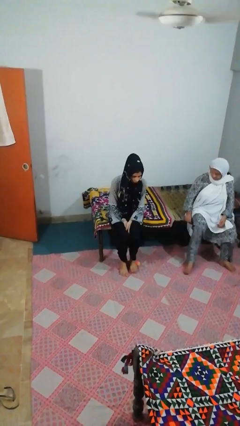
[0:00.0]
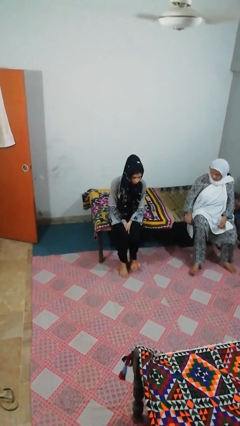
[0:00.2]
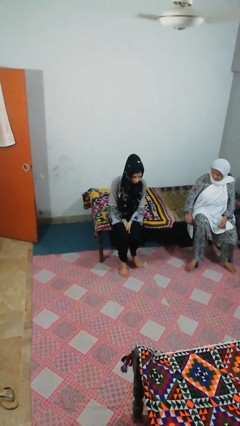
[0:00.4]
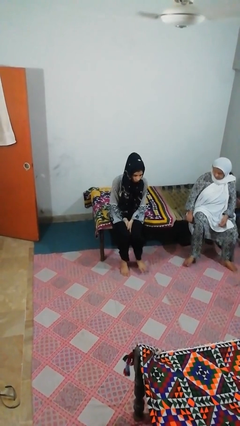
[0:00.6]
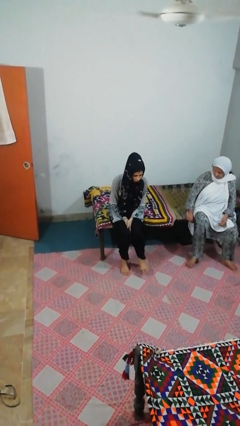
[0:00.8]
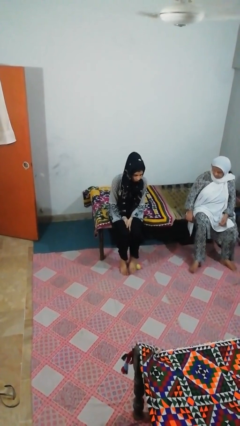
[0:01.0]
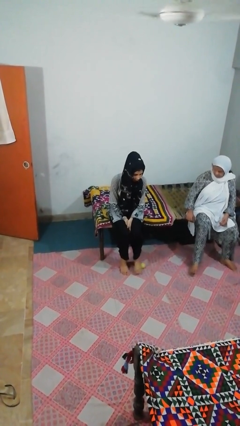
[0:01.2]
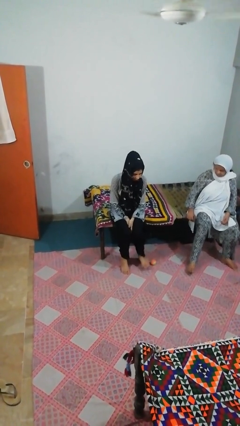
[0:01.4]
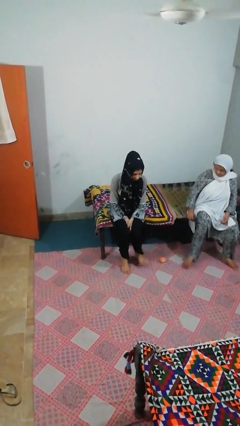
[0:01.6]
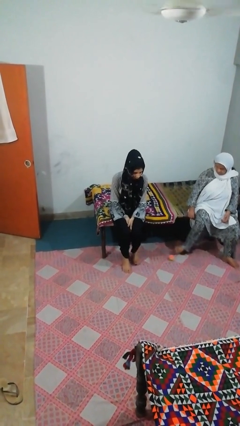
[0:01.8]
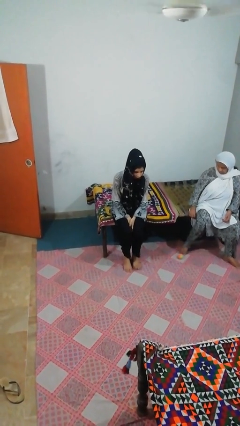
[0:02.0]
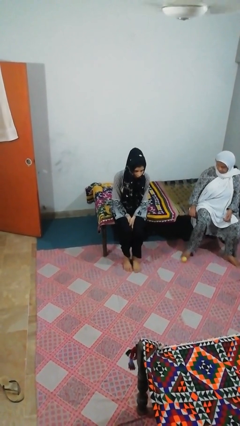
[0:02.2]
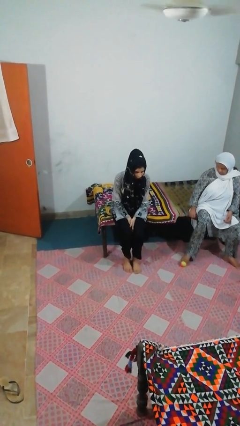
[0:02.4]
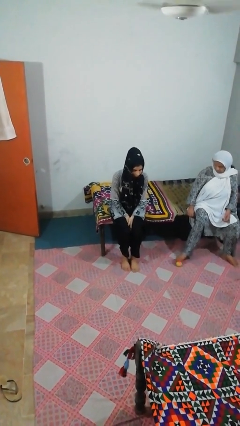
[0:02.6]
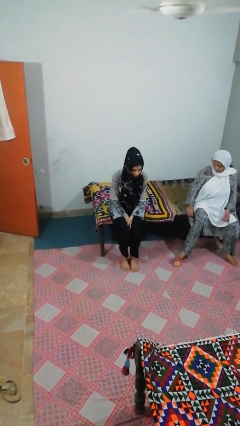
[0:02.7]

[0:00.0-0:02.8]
person kicks object to person

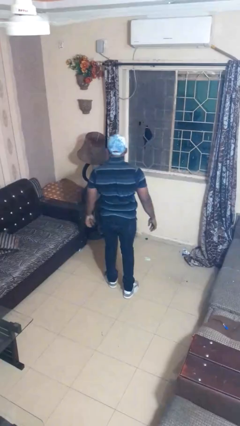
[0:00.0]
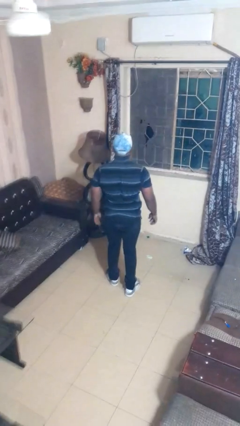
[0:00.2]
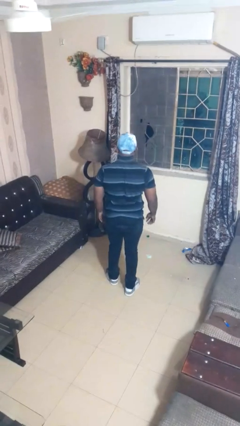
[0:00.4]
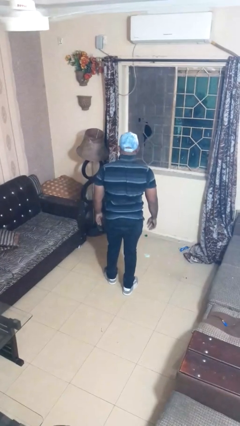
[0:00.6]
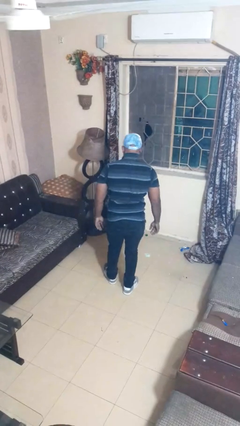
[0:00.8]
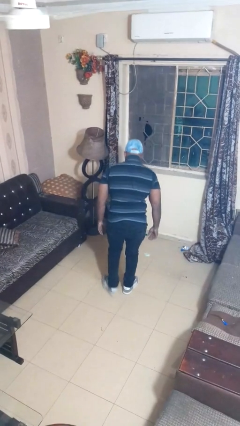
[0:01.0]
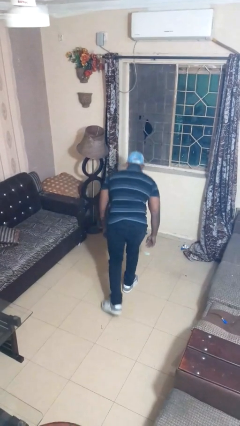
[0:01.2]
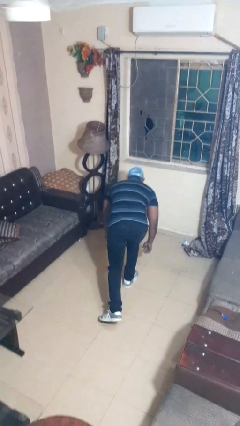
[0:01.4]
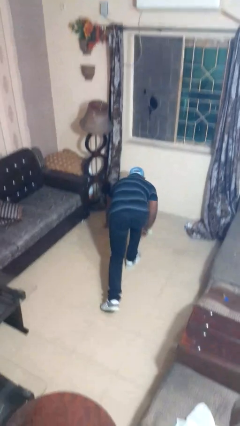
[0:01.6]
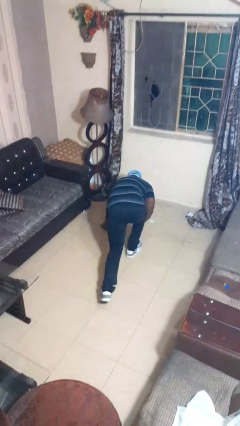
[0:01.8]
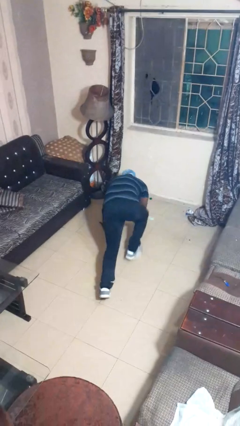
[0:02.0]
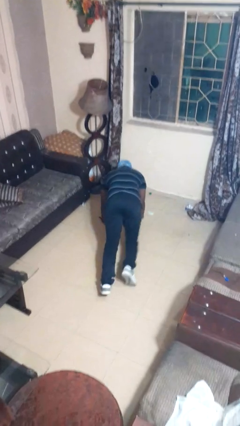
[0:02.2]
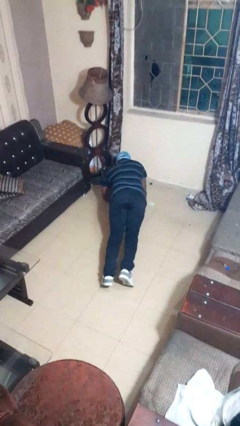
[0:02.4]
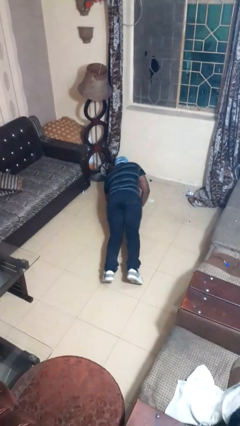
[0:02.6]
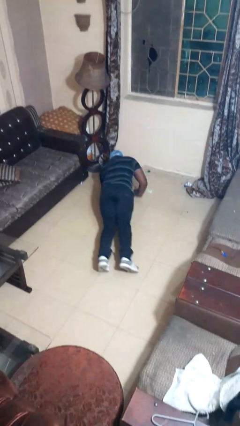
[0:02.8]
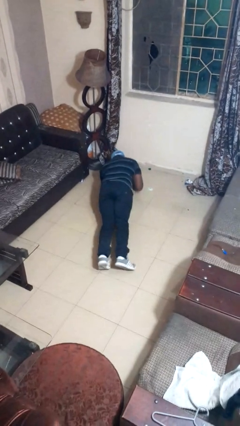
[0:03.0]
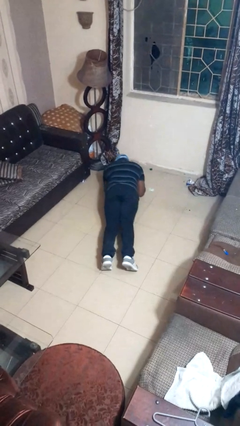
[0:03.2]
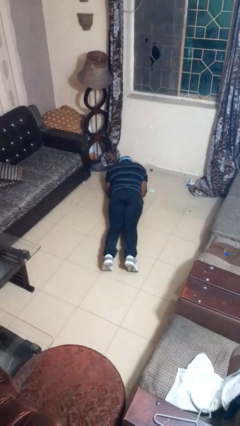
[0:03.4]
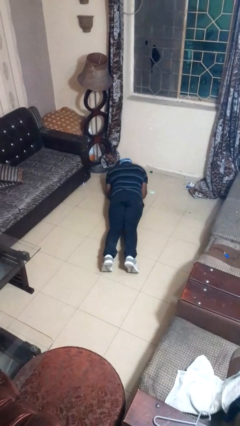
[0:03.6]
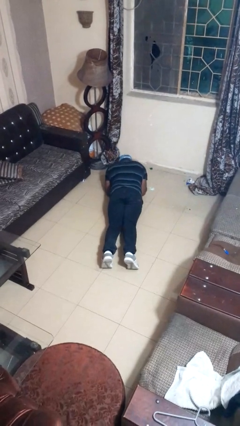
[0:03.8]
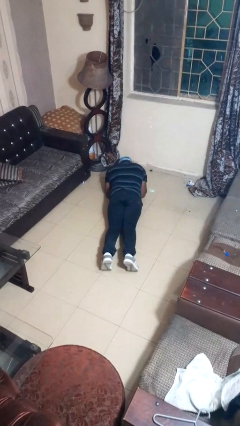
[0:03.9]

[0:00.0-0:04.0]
person exercises with plank

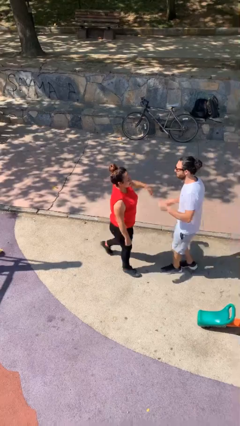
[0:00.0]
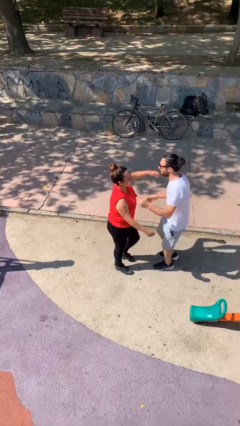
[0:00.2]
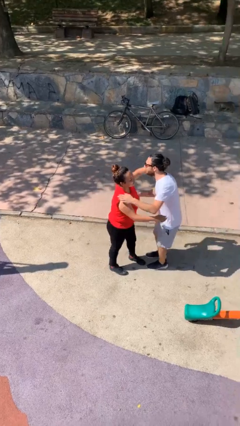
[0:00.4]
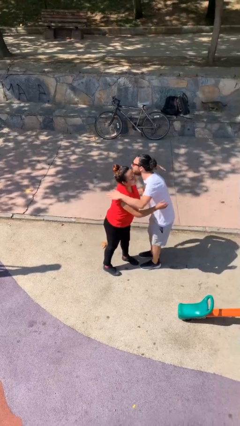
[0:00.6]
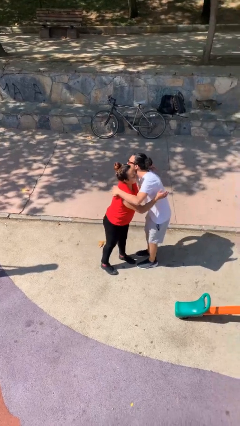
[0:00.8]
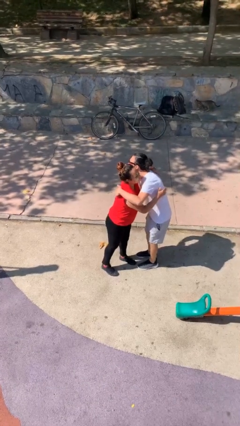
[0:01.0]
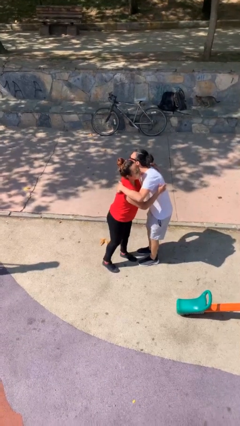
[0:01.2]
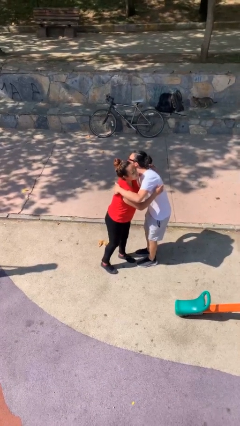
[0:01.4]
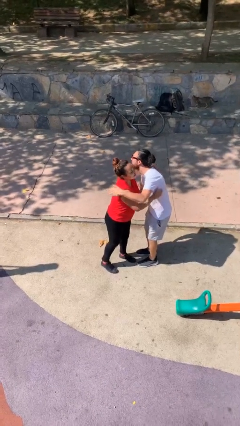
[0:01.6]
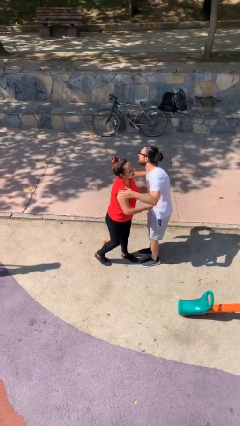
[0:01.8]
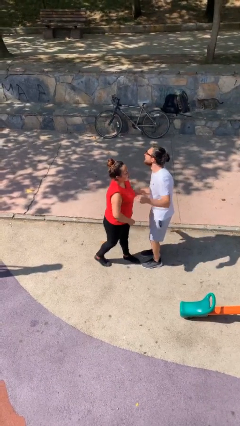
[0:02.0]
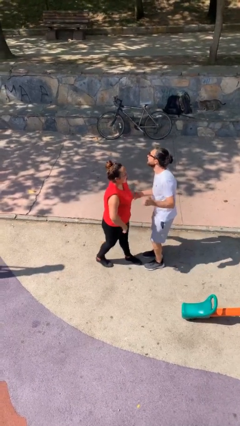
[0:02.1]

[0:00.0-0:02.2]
person embraces person

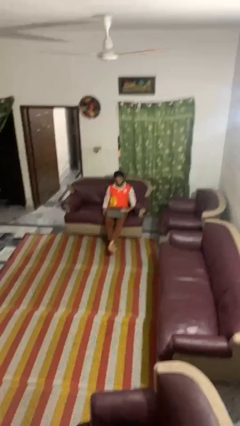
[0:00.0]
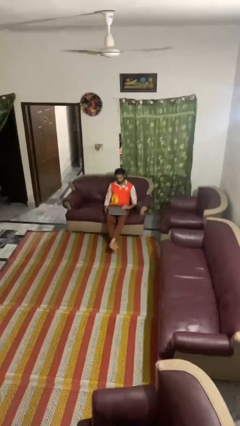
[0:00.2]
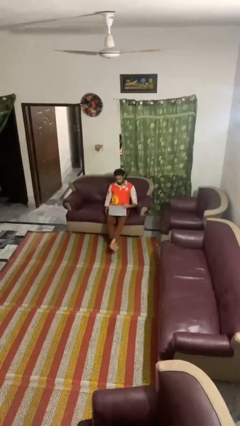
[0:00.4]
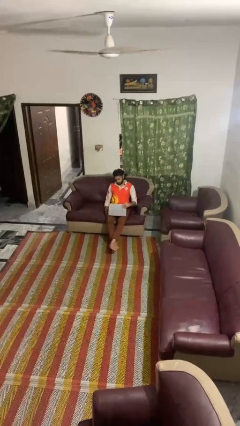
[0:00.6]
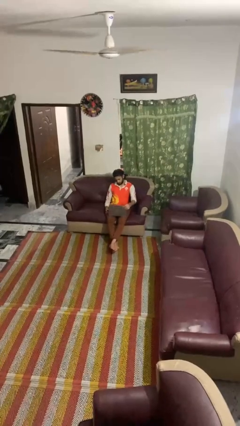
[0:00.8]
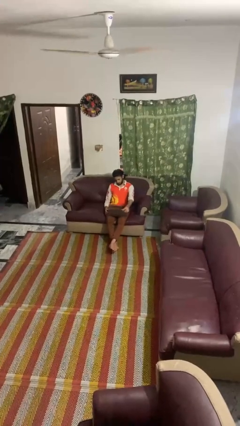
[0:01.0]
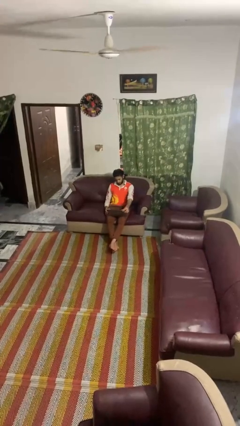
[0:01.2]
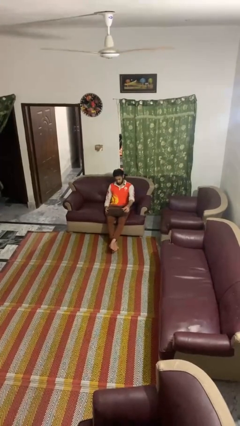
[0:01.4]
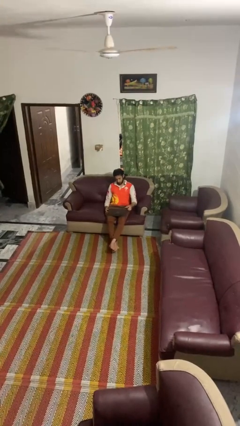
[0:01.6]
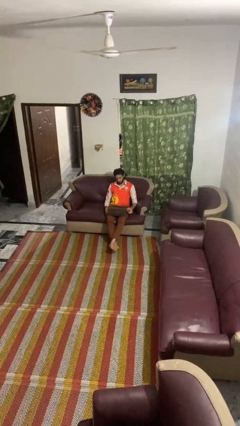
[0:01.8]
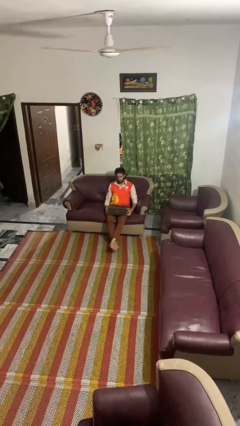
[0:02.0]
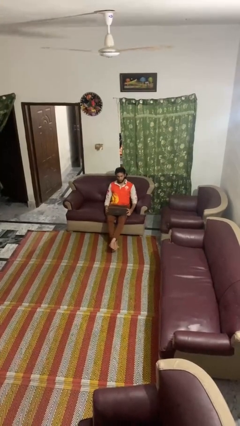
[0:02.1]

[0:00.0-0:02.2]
person opens laptop

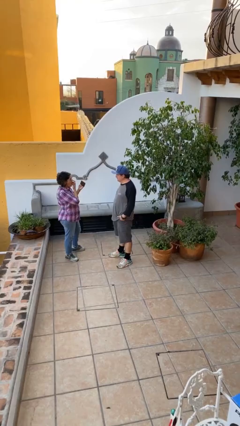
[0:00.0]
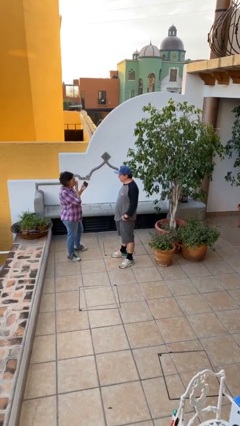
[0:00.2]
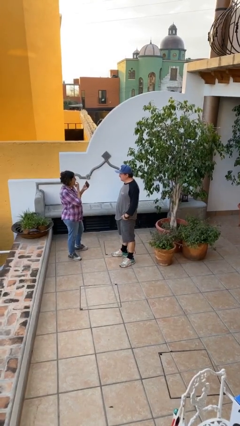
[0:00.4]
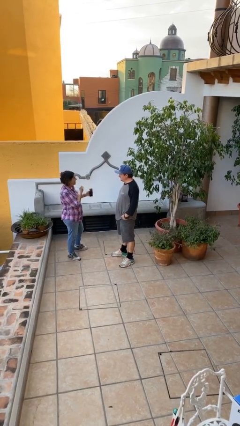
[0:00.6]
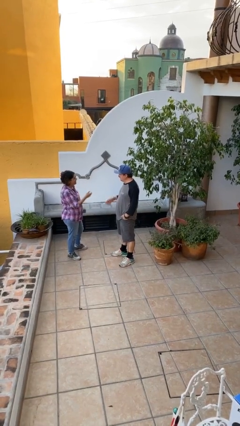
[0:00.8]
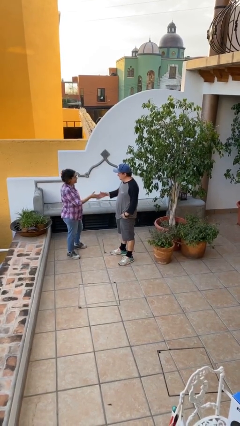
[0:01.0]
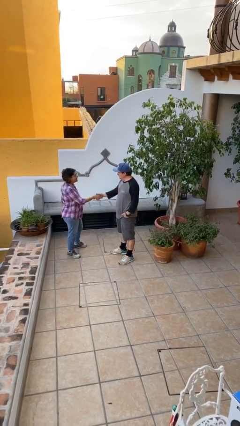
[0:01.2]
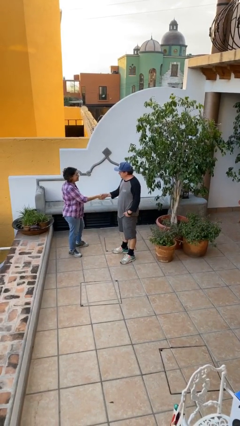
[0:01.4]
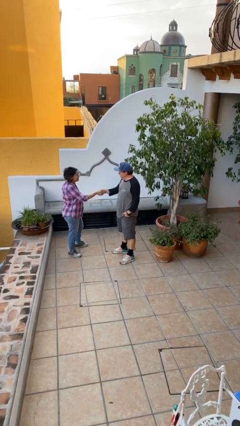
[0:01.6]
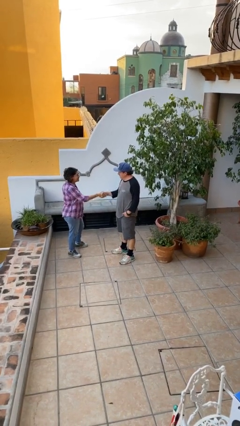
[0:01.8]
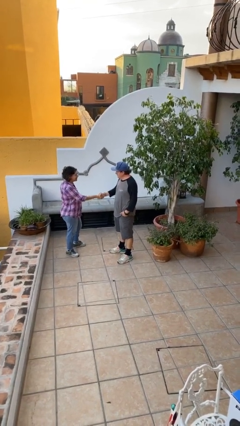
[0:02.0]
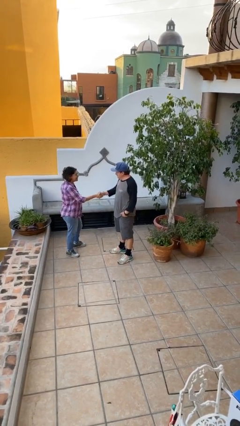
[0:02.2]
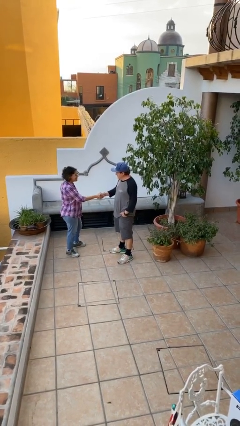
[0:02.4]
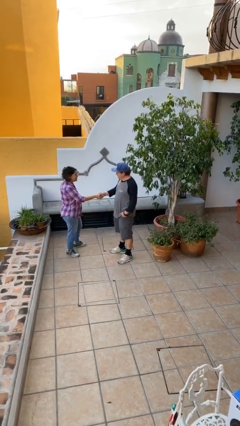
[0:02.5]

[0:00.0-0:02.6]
person shakes hand

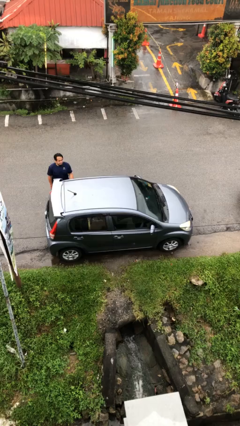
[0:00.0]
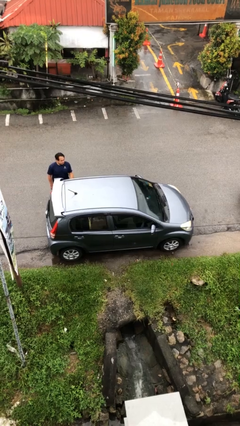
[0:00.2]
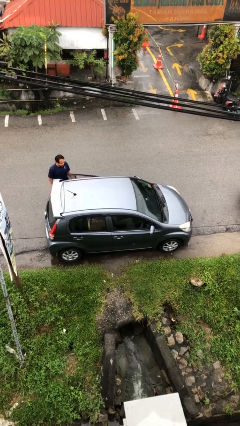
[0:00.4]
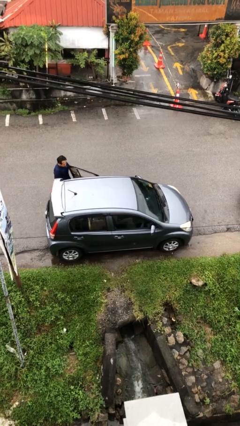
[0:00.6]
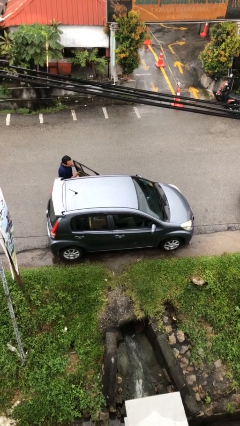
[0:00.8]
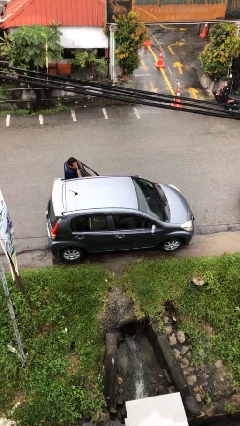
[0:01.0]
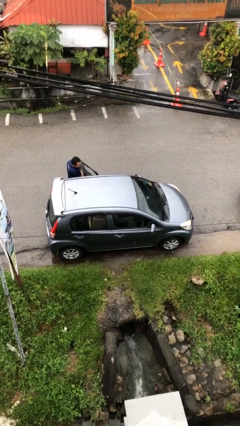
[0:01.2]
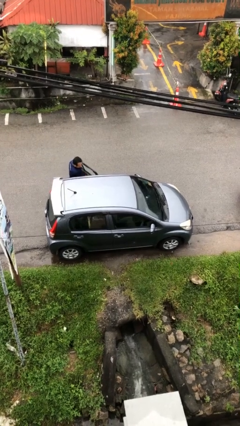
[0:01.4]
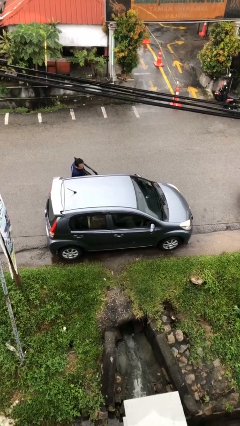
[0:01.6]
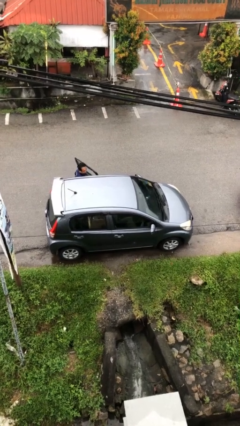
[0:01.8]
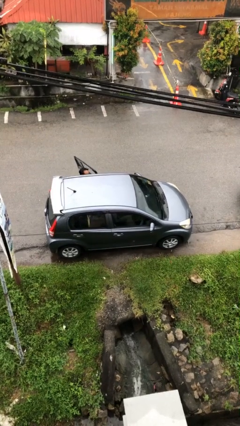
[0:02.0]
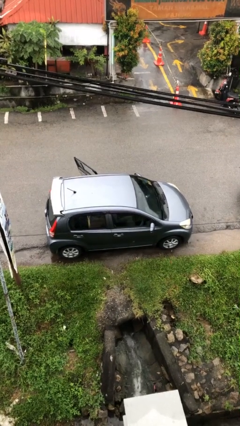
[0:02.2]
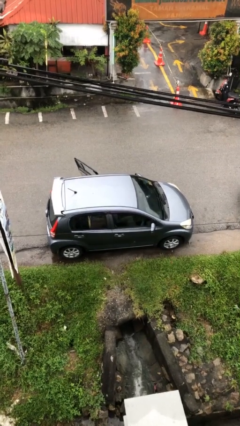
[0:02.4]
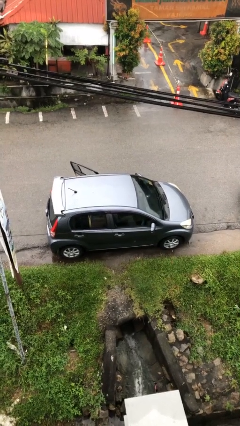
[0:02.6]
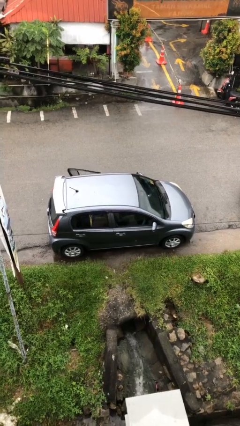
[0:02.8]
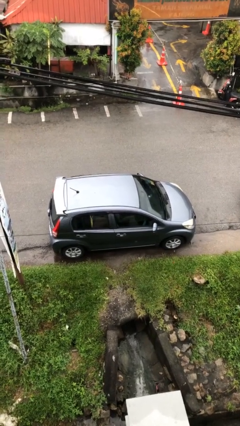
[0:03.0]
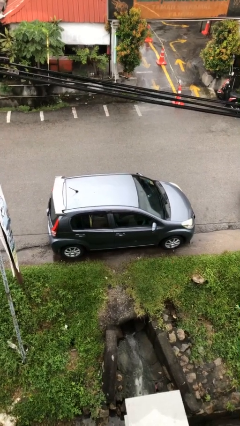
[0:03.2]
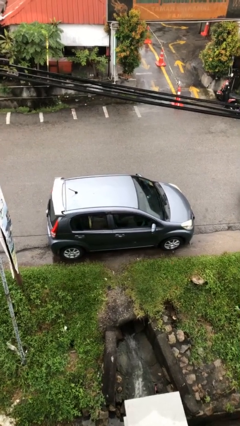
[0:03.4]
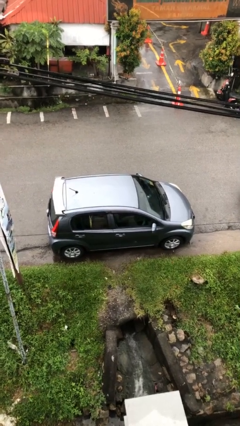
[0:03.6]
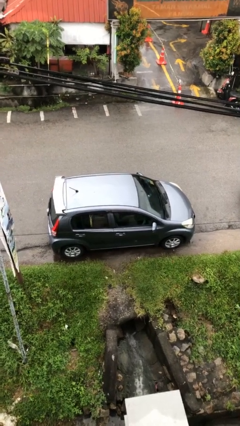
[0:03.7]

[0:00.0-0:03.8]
car picks up person
